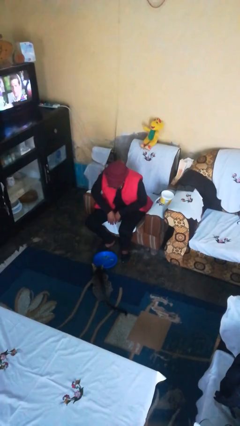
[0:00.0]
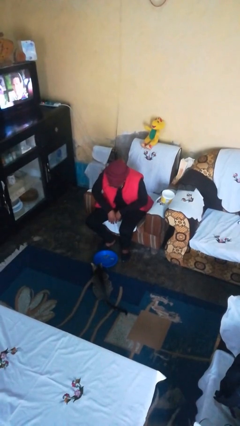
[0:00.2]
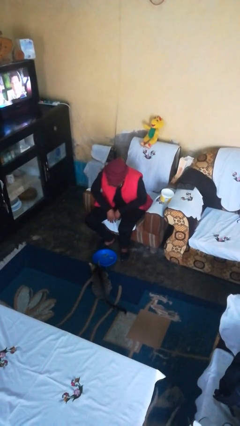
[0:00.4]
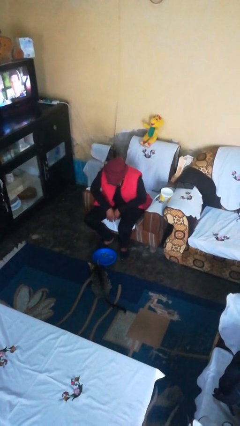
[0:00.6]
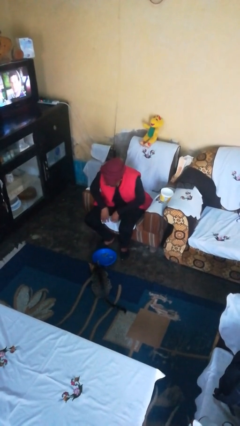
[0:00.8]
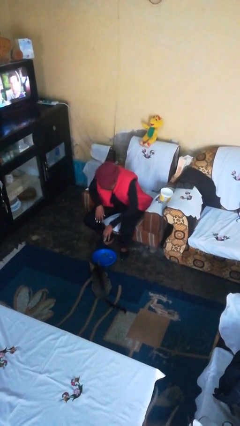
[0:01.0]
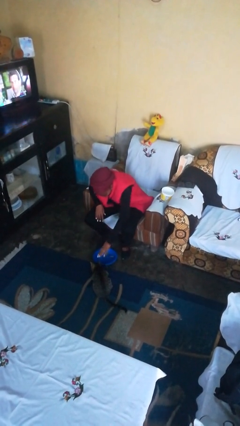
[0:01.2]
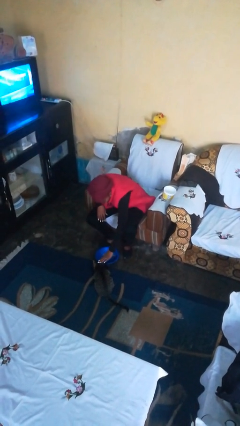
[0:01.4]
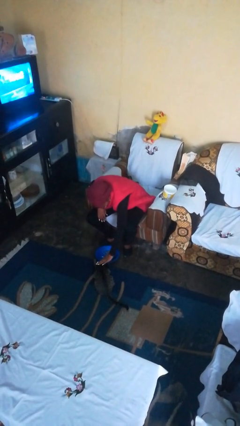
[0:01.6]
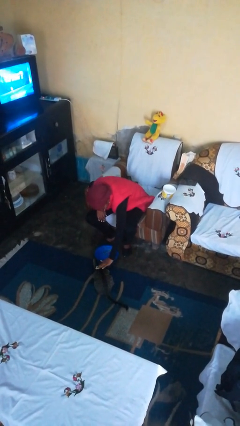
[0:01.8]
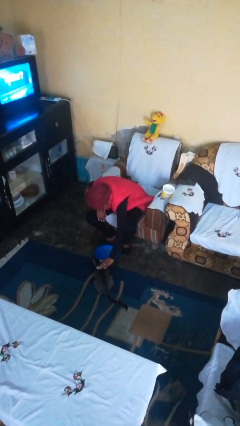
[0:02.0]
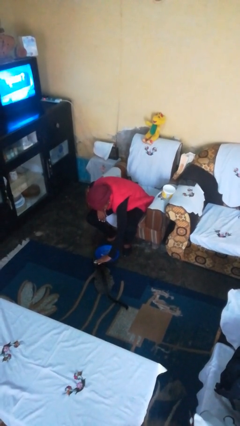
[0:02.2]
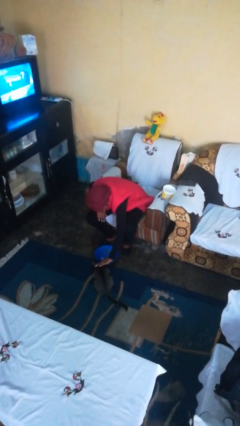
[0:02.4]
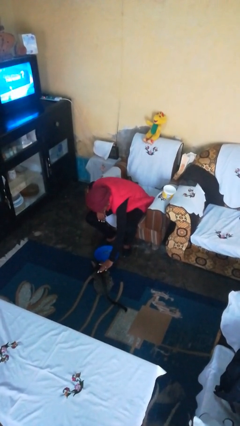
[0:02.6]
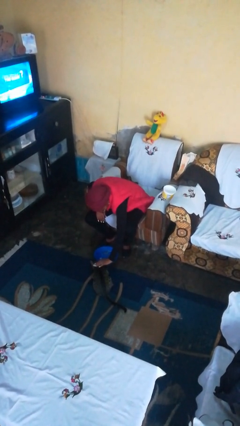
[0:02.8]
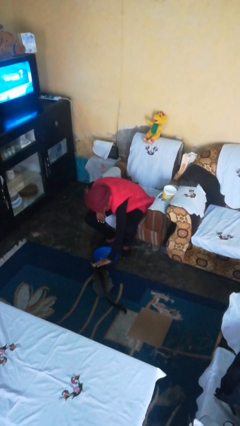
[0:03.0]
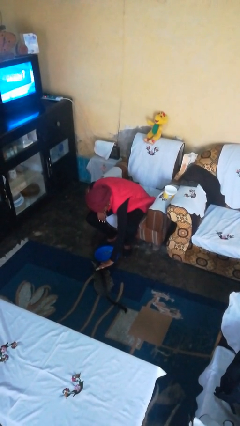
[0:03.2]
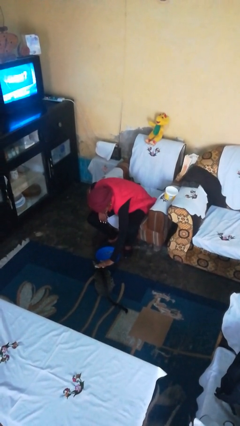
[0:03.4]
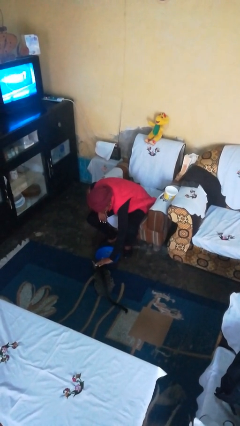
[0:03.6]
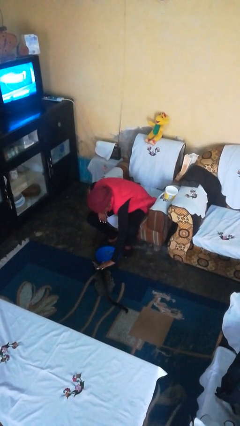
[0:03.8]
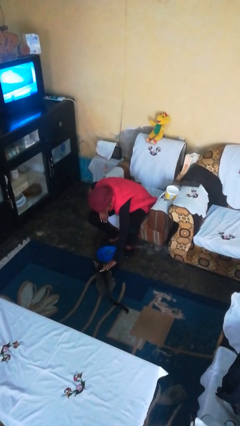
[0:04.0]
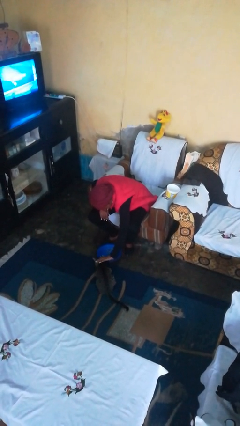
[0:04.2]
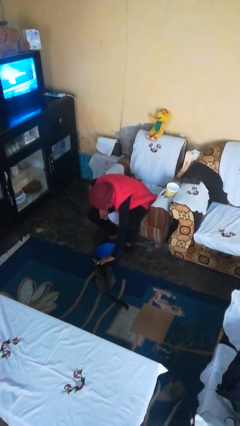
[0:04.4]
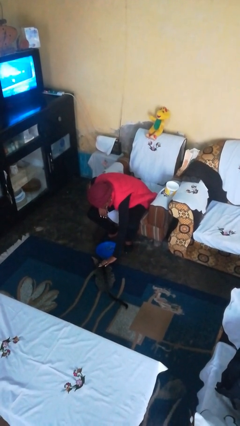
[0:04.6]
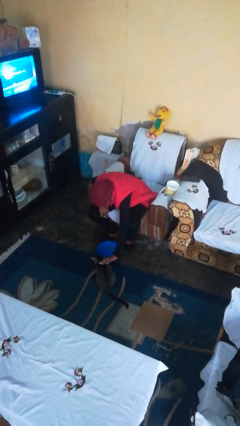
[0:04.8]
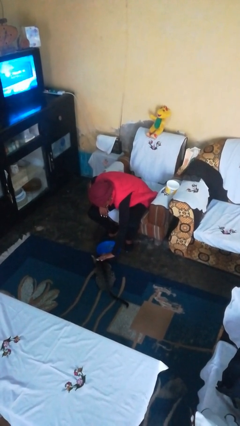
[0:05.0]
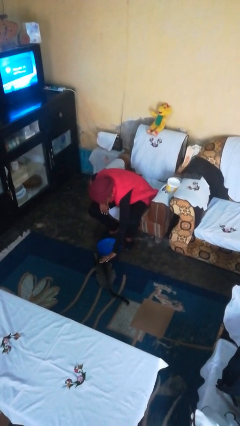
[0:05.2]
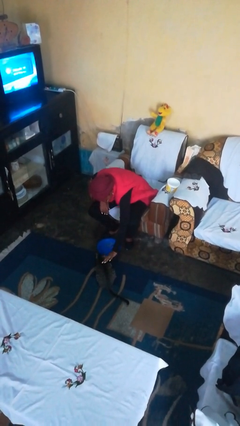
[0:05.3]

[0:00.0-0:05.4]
person pets cat

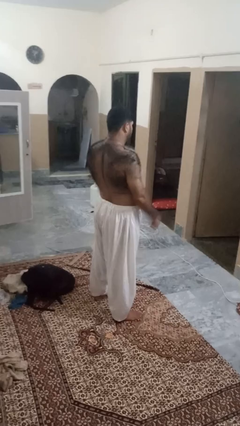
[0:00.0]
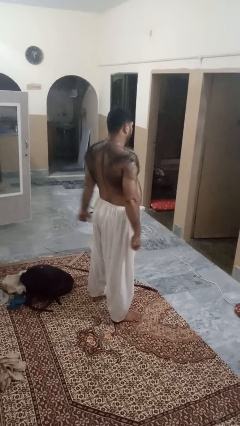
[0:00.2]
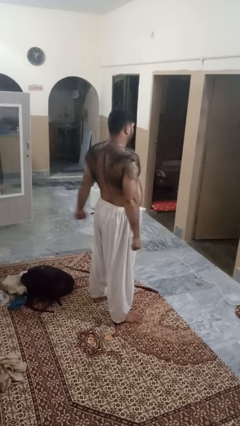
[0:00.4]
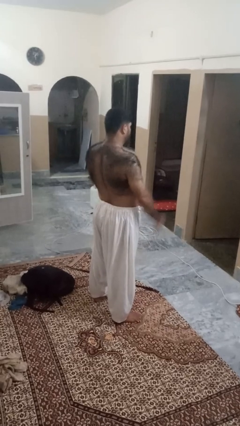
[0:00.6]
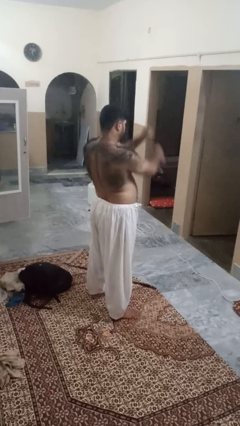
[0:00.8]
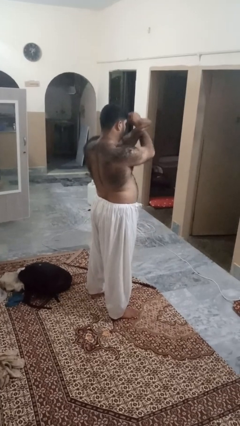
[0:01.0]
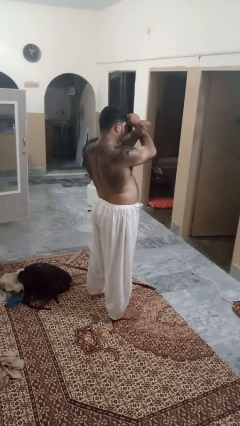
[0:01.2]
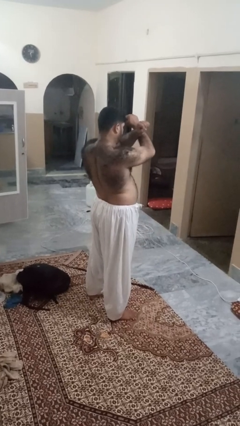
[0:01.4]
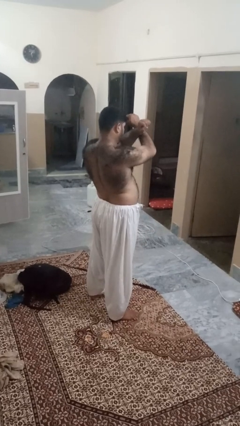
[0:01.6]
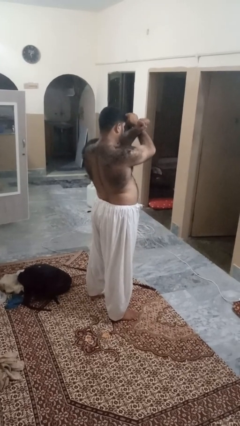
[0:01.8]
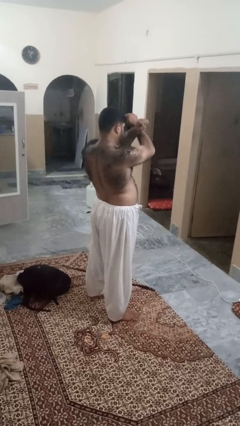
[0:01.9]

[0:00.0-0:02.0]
person gestures arms x

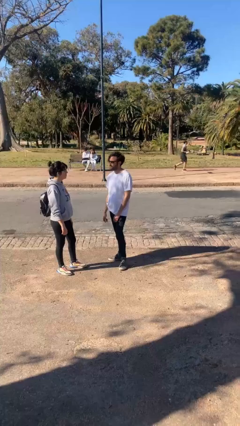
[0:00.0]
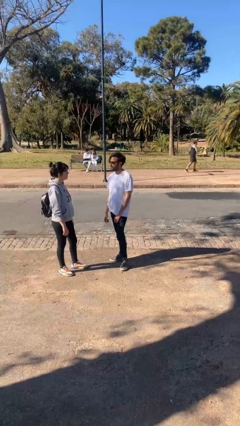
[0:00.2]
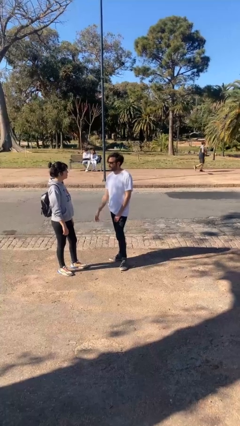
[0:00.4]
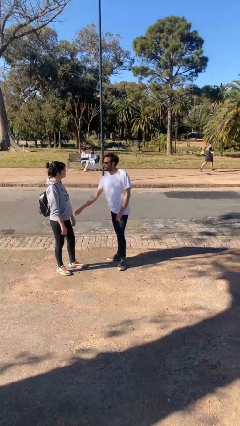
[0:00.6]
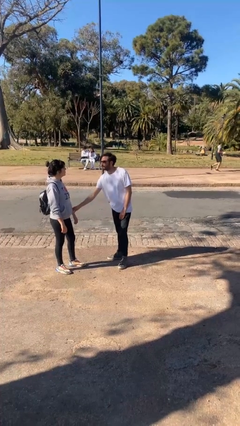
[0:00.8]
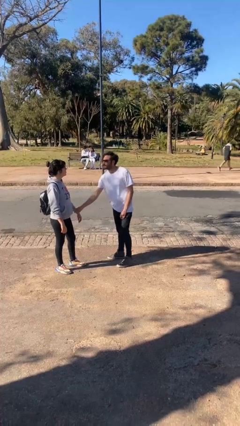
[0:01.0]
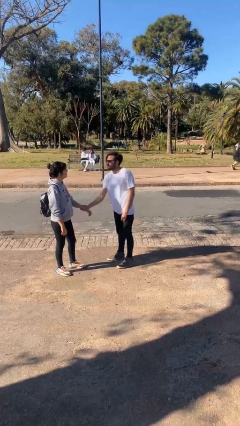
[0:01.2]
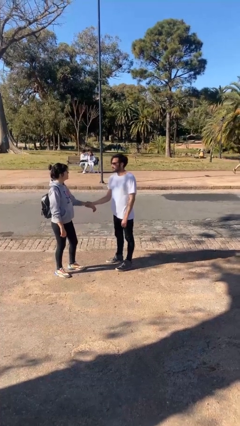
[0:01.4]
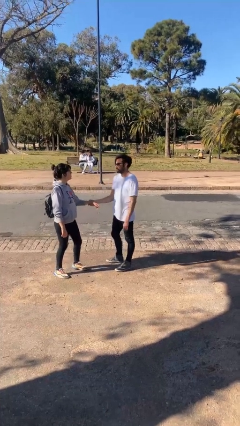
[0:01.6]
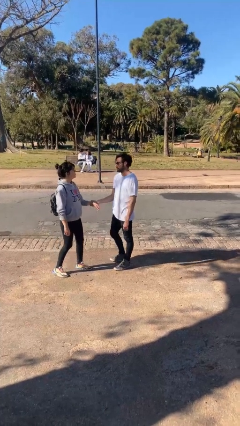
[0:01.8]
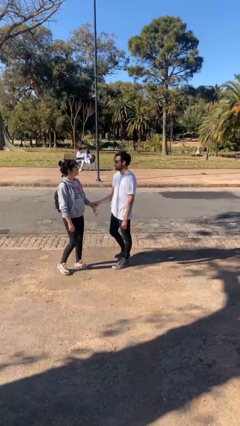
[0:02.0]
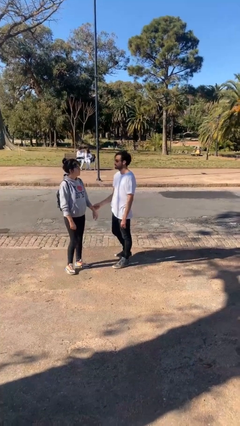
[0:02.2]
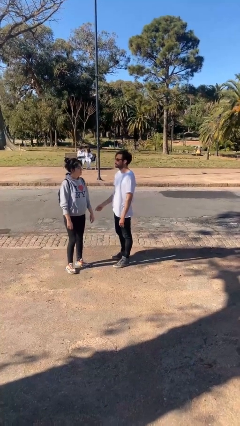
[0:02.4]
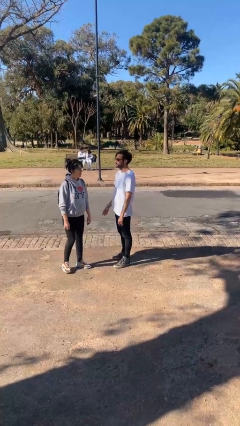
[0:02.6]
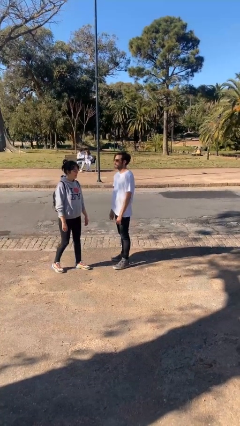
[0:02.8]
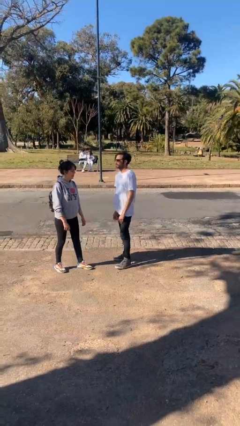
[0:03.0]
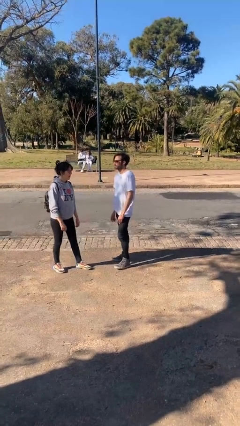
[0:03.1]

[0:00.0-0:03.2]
person grabs person by forearm

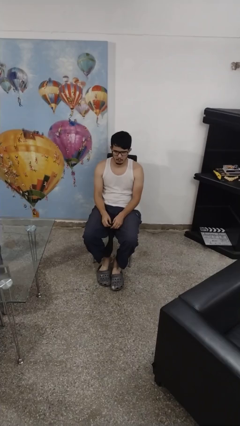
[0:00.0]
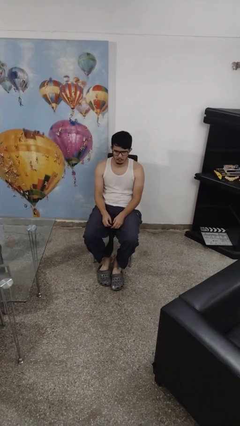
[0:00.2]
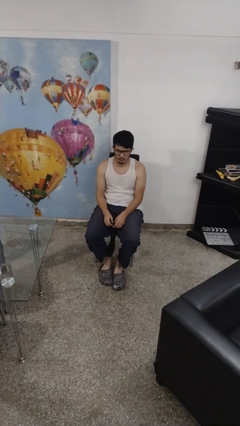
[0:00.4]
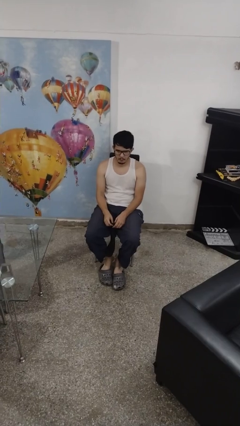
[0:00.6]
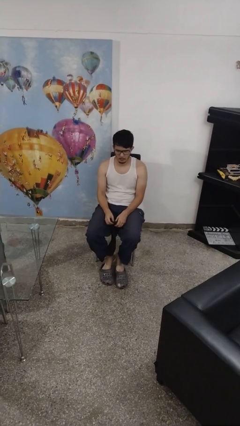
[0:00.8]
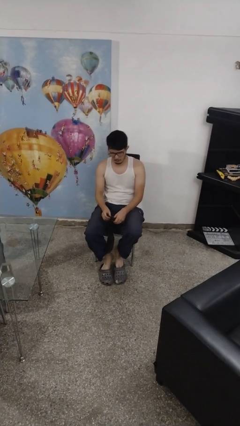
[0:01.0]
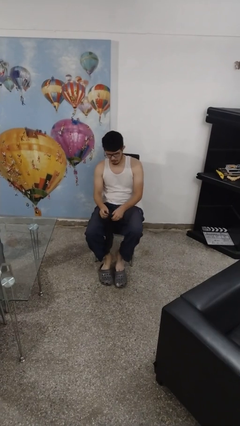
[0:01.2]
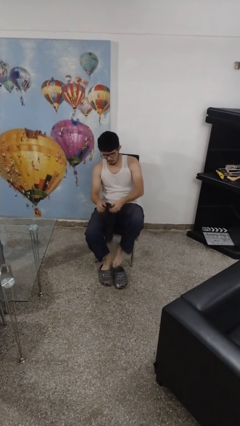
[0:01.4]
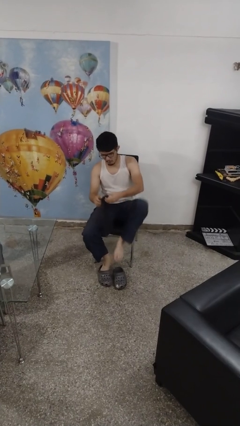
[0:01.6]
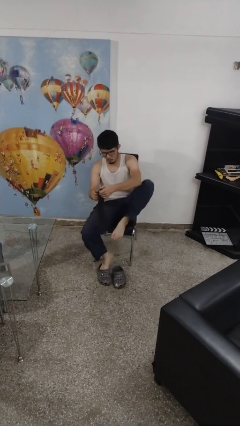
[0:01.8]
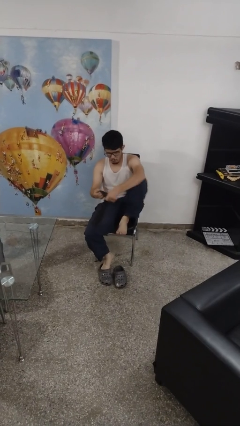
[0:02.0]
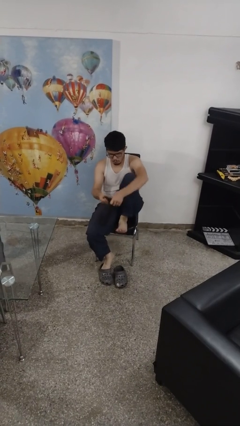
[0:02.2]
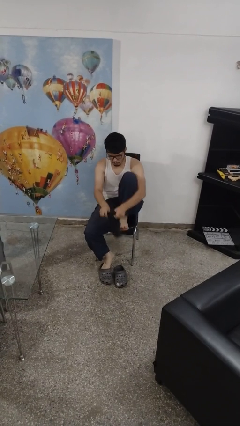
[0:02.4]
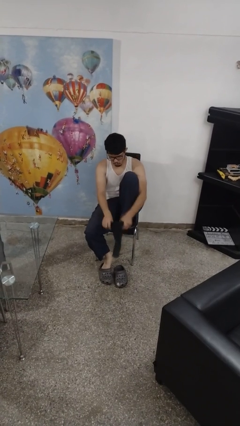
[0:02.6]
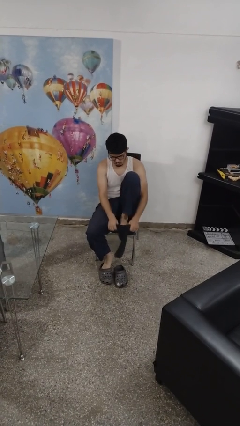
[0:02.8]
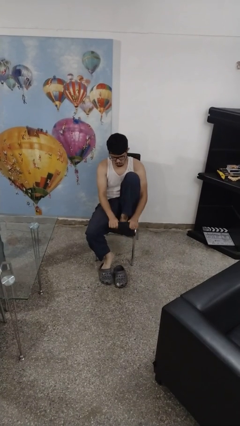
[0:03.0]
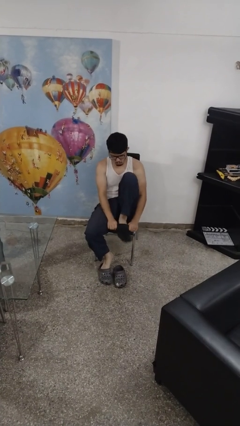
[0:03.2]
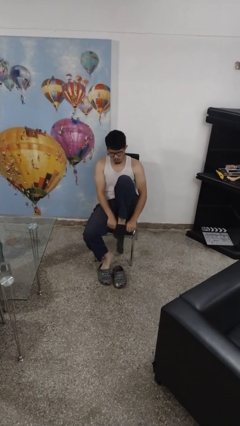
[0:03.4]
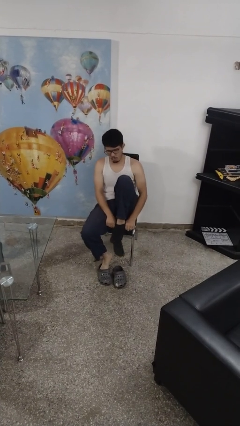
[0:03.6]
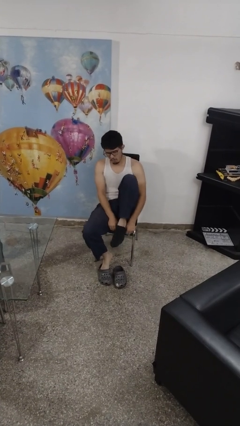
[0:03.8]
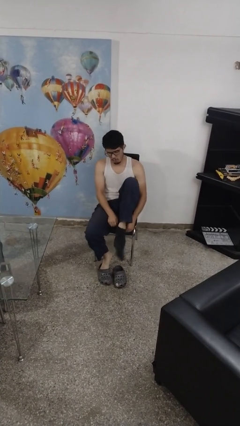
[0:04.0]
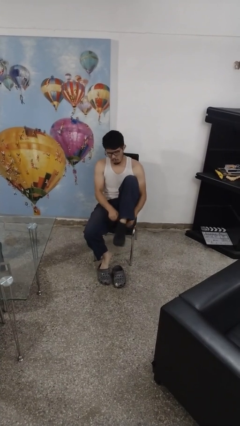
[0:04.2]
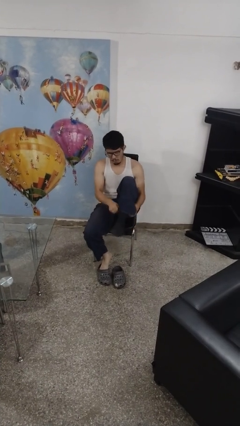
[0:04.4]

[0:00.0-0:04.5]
person puts on socks

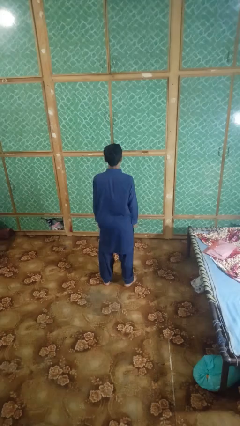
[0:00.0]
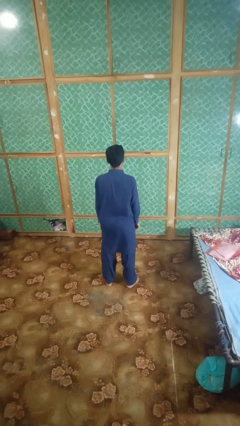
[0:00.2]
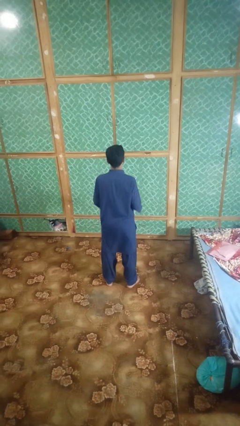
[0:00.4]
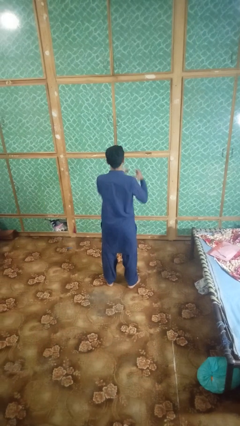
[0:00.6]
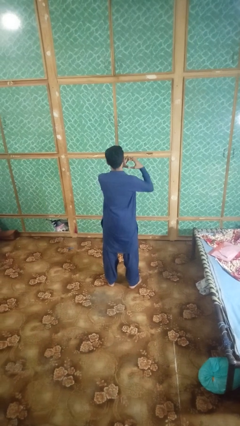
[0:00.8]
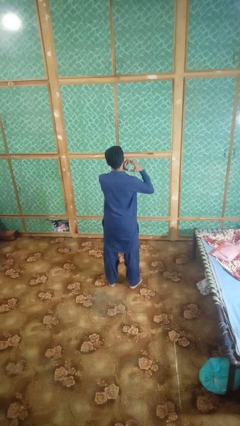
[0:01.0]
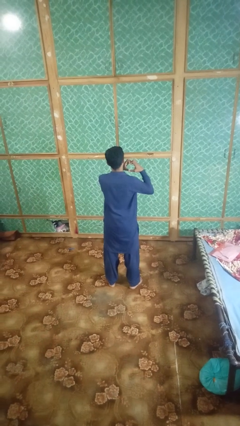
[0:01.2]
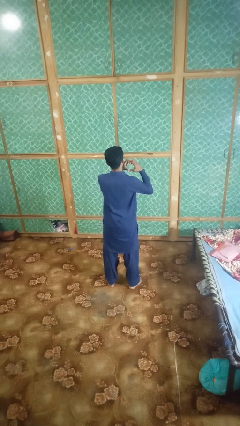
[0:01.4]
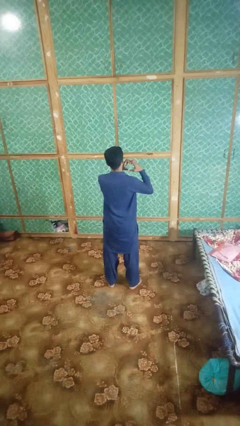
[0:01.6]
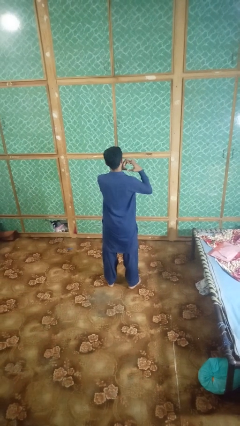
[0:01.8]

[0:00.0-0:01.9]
person gestures heart

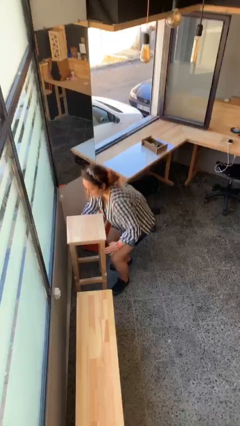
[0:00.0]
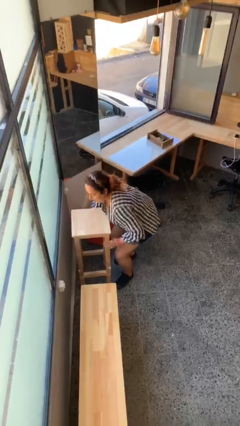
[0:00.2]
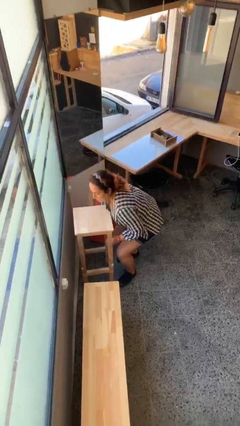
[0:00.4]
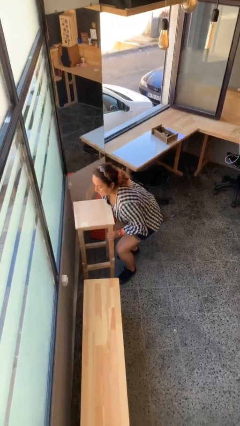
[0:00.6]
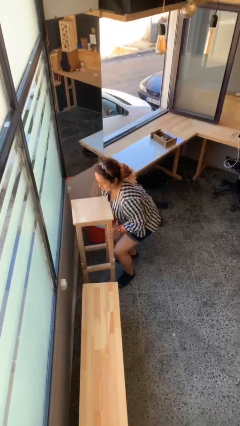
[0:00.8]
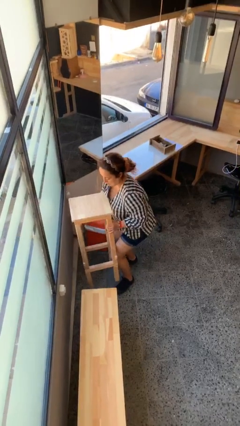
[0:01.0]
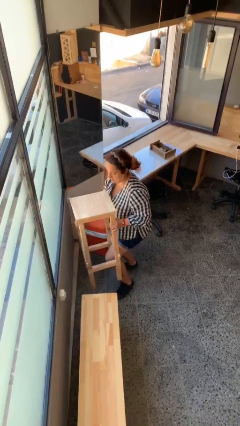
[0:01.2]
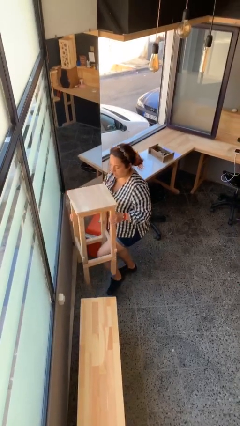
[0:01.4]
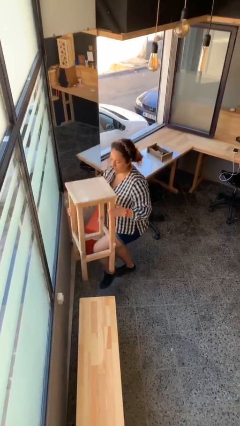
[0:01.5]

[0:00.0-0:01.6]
person picks up object from floor
